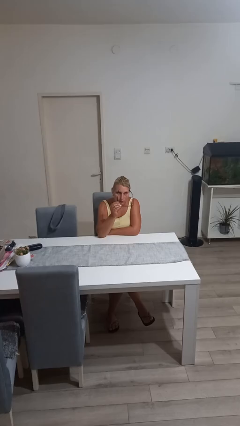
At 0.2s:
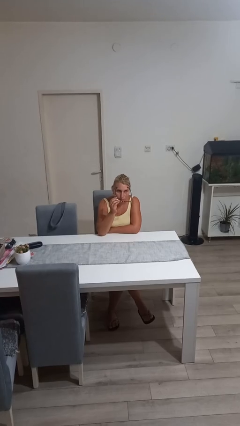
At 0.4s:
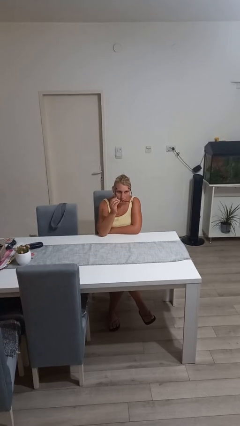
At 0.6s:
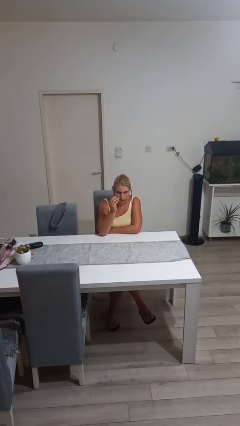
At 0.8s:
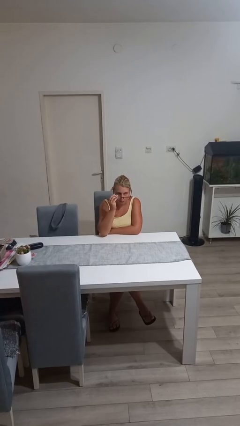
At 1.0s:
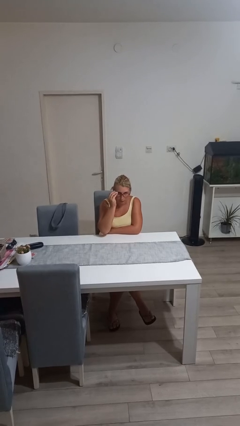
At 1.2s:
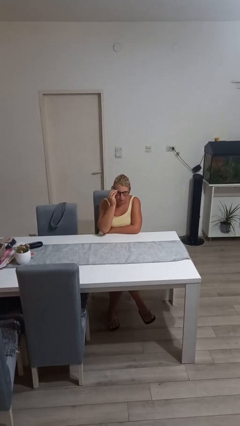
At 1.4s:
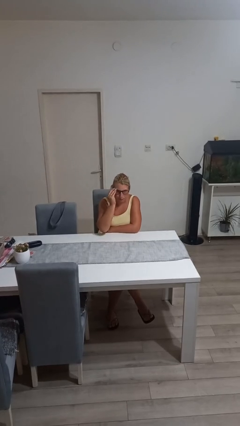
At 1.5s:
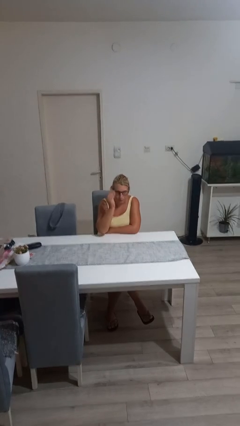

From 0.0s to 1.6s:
person puts on glasses

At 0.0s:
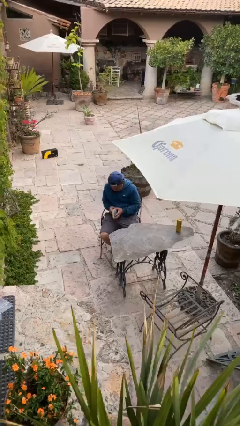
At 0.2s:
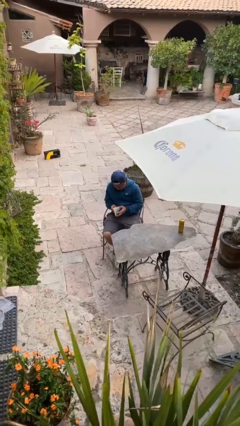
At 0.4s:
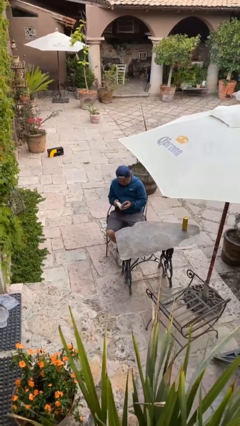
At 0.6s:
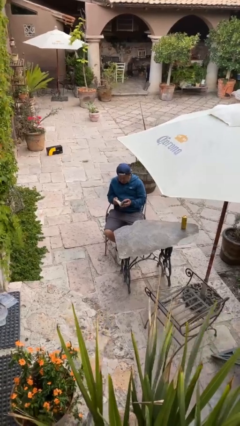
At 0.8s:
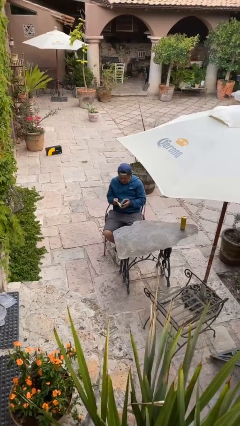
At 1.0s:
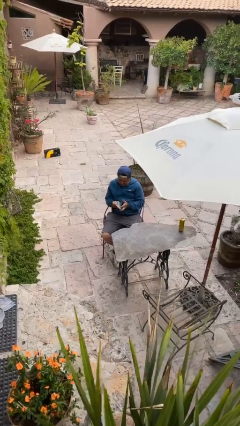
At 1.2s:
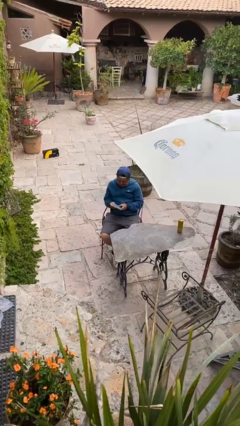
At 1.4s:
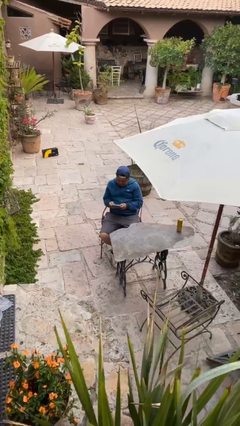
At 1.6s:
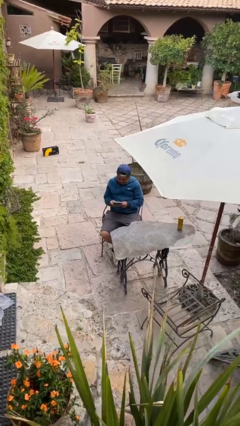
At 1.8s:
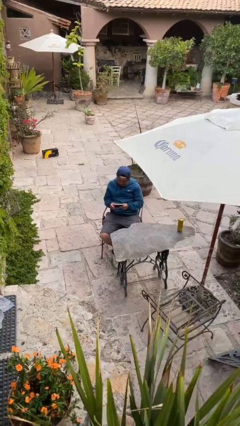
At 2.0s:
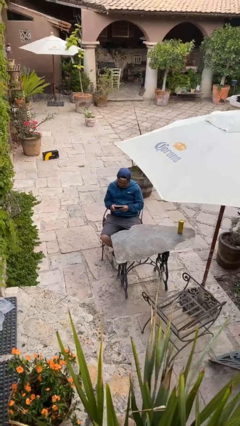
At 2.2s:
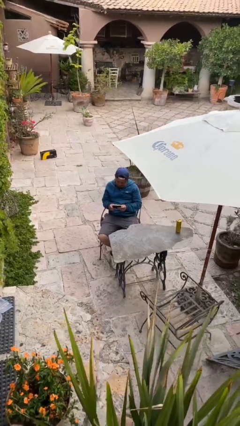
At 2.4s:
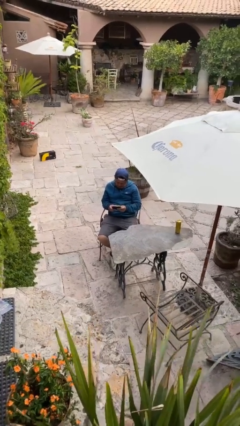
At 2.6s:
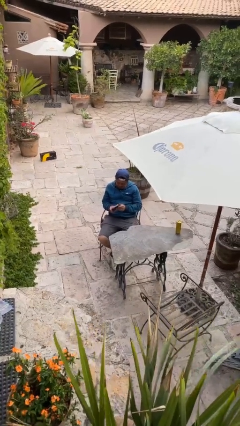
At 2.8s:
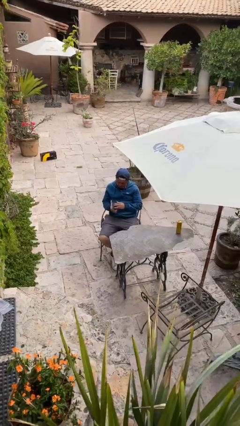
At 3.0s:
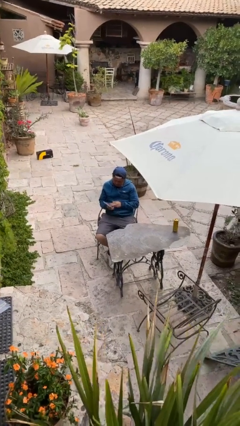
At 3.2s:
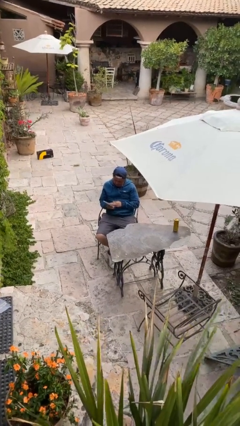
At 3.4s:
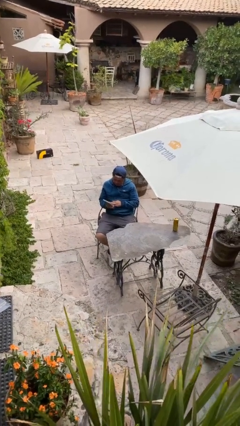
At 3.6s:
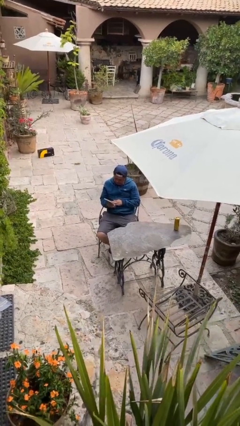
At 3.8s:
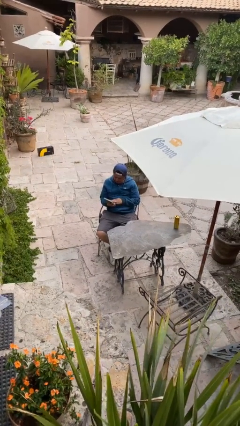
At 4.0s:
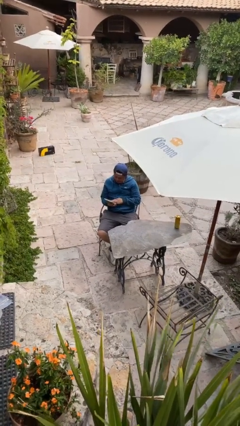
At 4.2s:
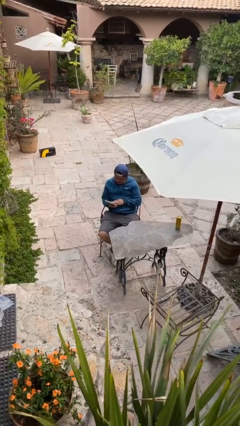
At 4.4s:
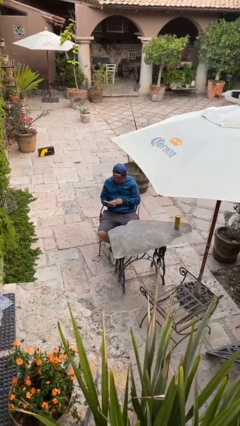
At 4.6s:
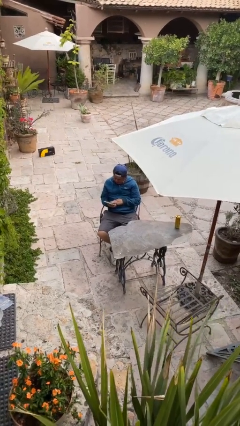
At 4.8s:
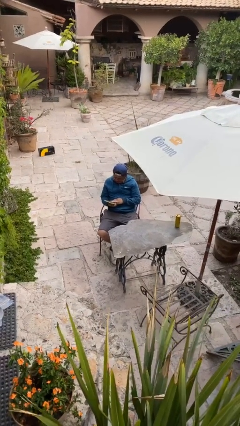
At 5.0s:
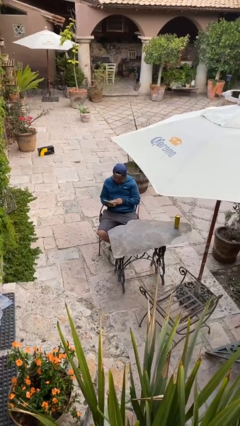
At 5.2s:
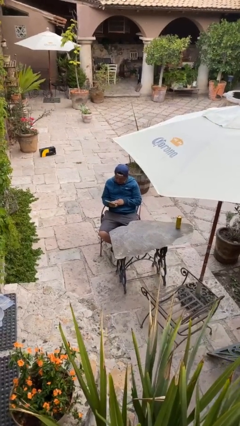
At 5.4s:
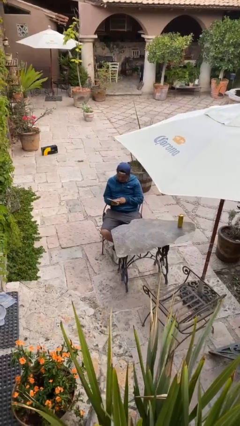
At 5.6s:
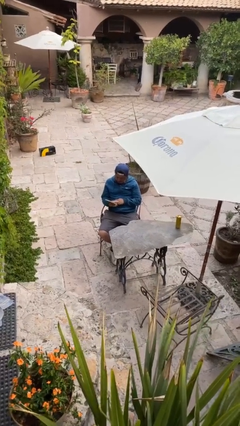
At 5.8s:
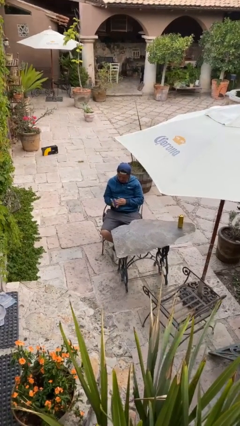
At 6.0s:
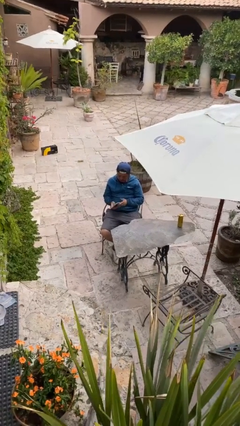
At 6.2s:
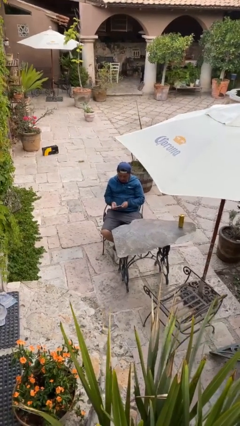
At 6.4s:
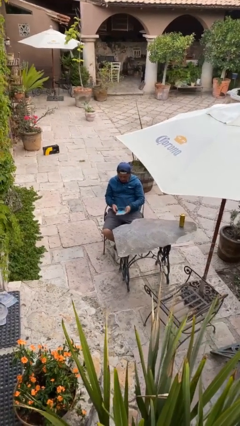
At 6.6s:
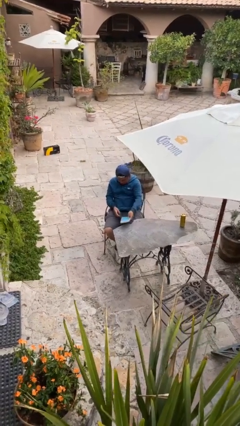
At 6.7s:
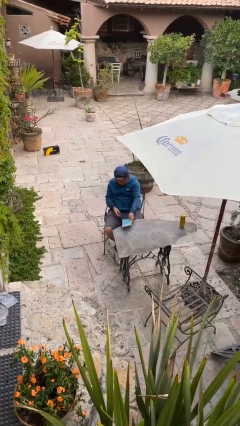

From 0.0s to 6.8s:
person reads document

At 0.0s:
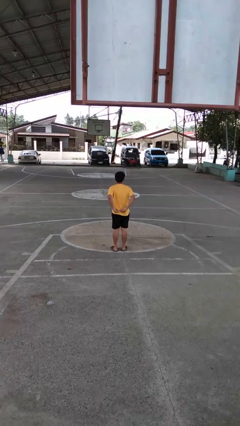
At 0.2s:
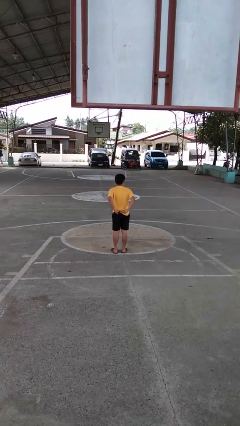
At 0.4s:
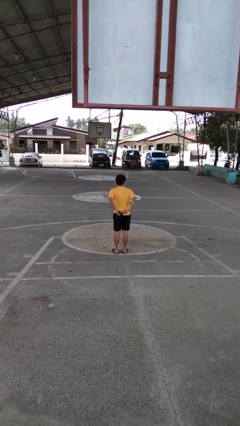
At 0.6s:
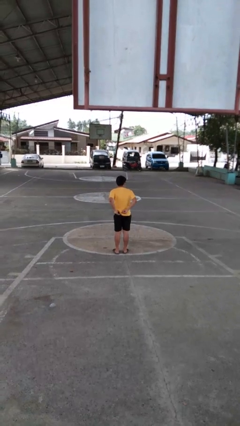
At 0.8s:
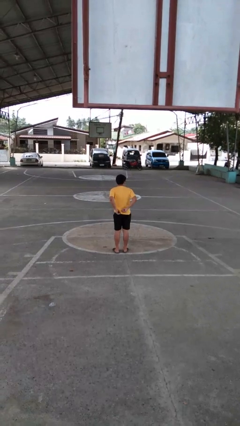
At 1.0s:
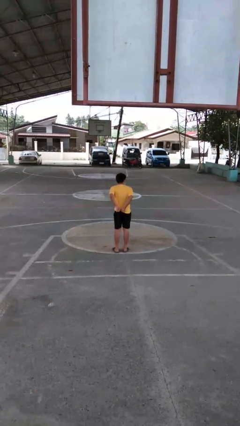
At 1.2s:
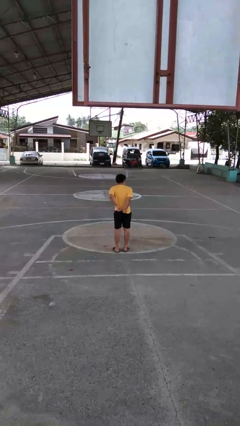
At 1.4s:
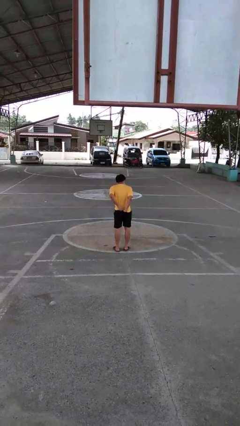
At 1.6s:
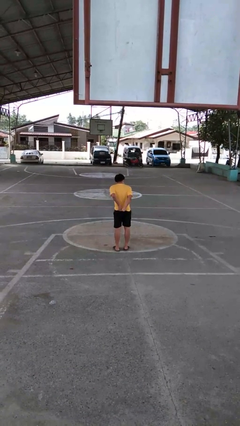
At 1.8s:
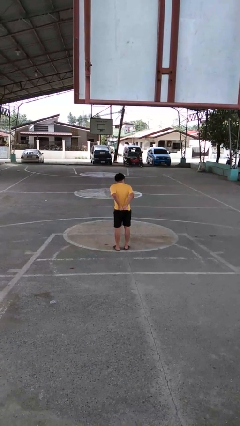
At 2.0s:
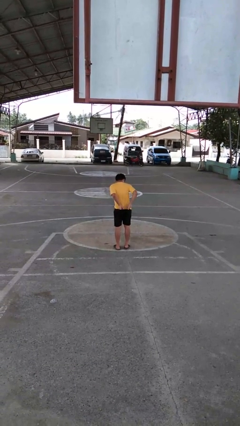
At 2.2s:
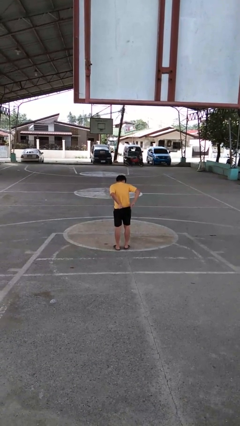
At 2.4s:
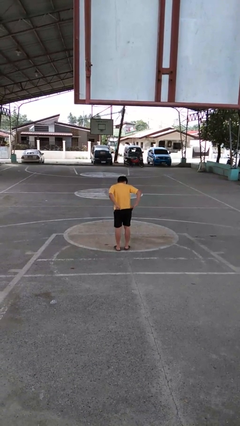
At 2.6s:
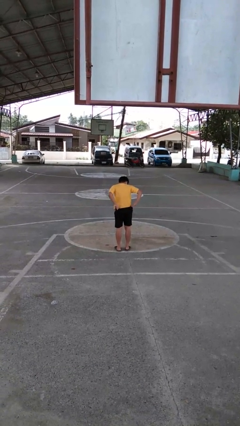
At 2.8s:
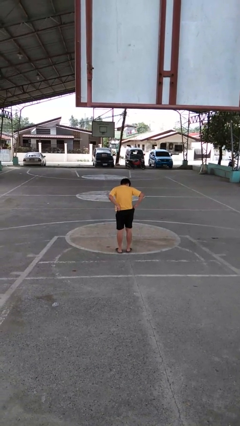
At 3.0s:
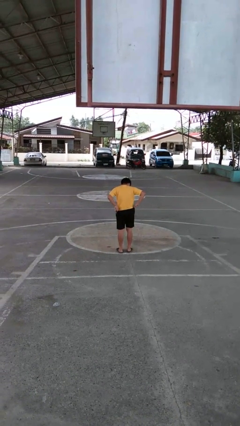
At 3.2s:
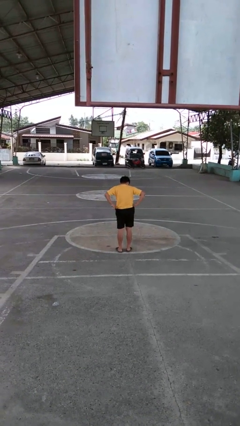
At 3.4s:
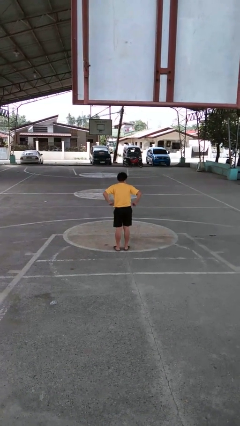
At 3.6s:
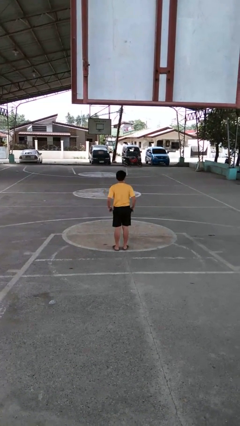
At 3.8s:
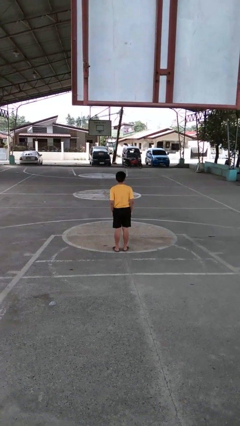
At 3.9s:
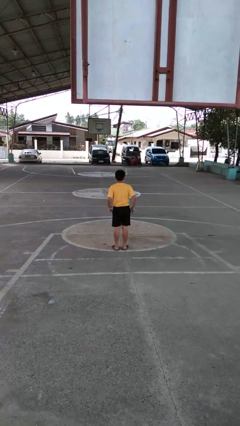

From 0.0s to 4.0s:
person tucks in shirt

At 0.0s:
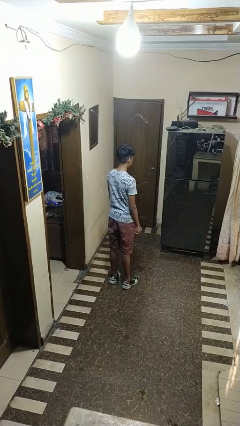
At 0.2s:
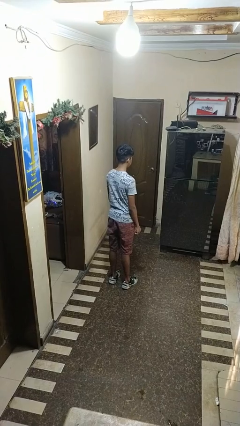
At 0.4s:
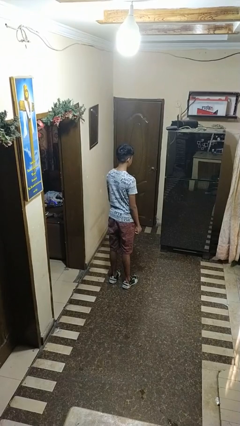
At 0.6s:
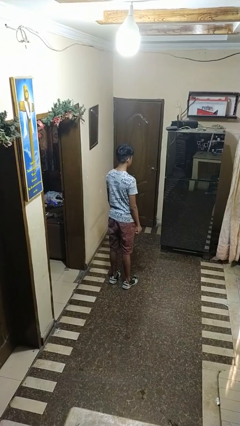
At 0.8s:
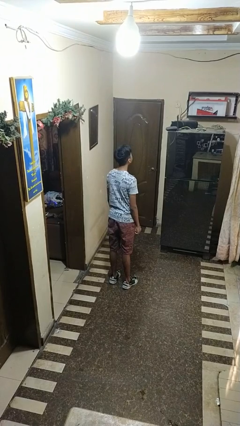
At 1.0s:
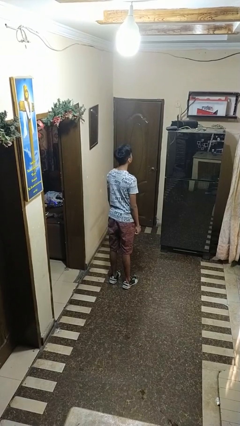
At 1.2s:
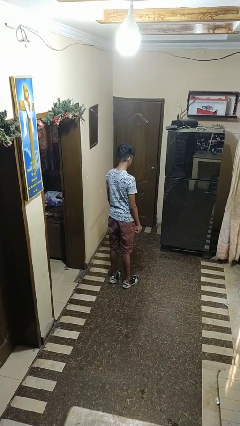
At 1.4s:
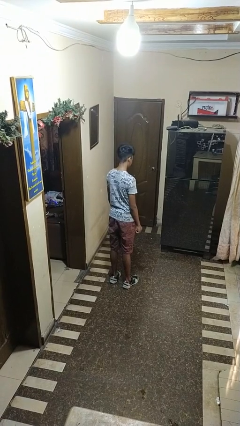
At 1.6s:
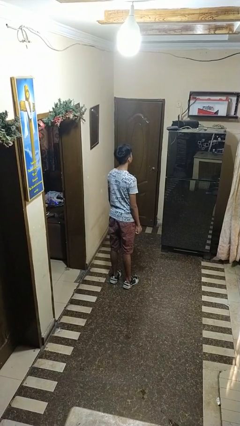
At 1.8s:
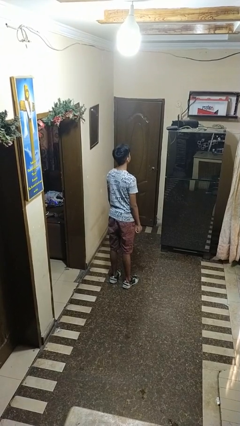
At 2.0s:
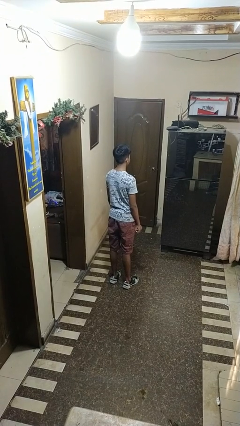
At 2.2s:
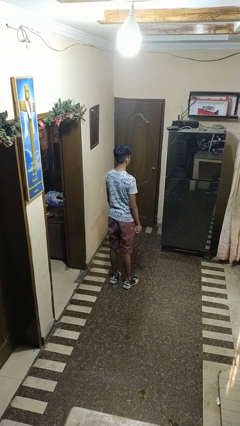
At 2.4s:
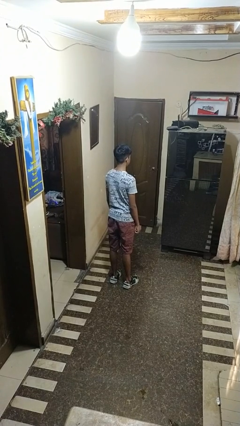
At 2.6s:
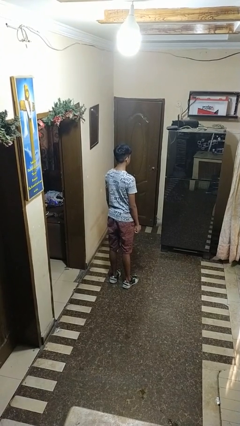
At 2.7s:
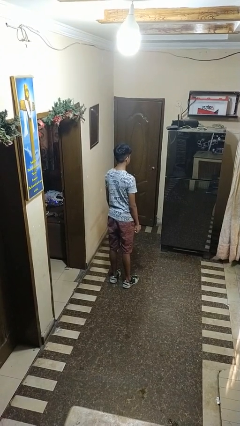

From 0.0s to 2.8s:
person shakes head

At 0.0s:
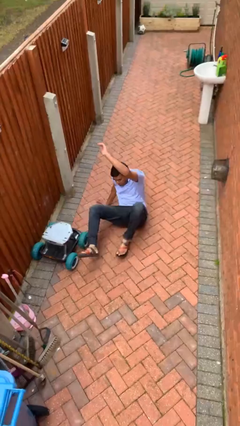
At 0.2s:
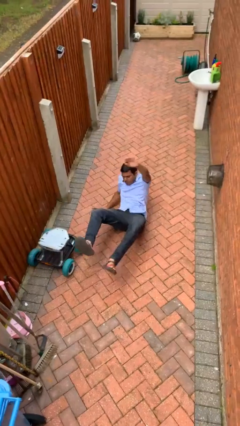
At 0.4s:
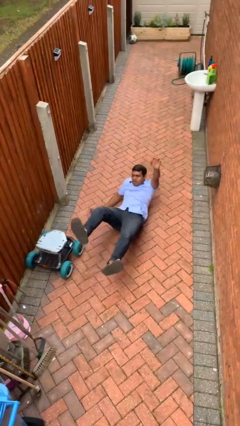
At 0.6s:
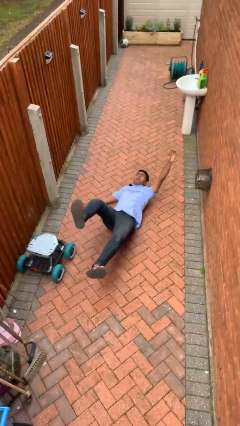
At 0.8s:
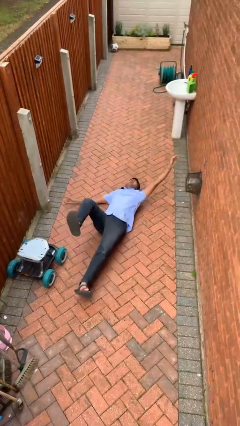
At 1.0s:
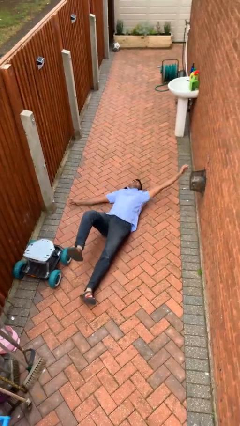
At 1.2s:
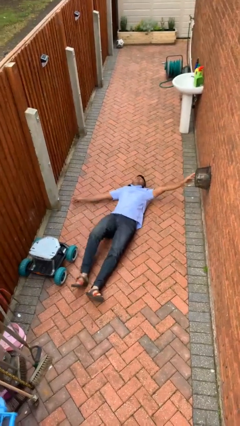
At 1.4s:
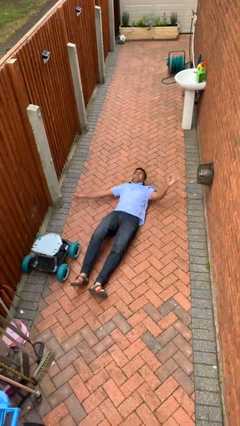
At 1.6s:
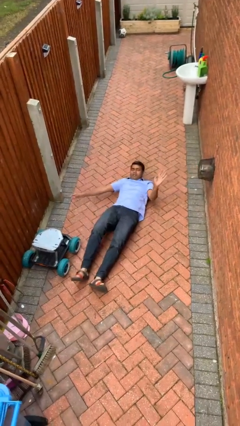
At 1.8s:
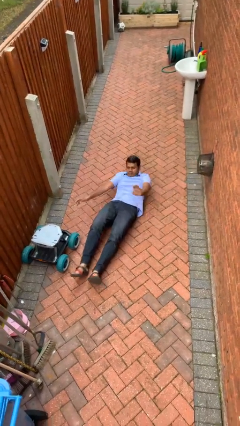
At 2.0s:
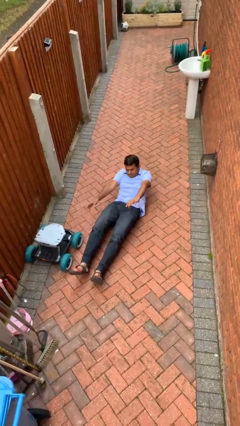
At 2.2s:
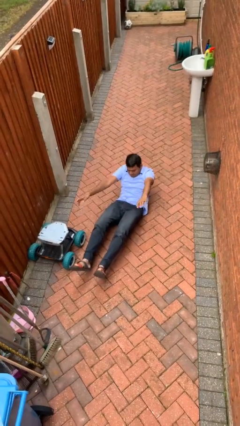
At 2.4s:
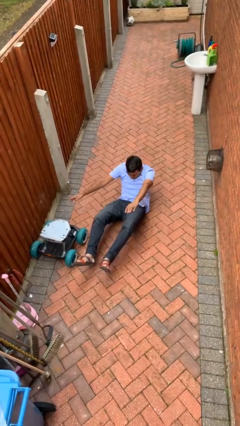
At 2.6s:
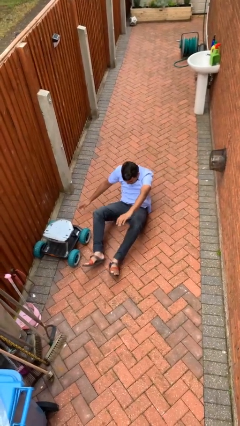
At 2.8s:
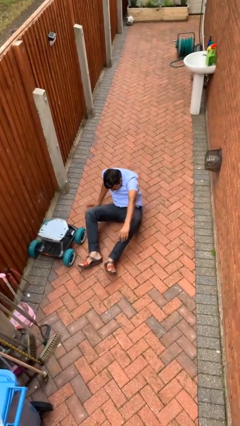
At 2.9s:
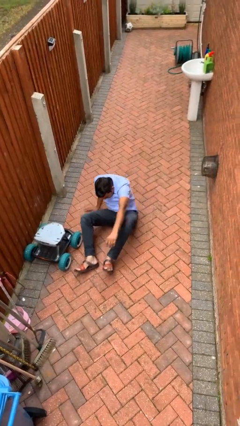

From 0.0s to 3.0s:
person lies down on floor
